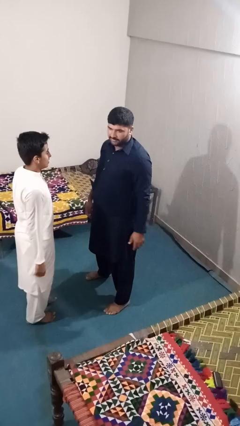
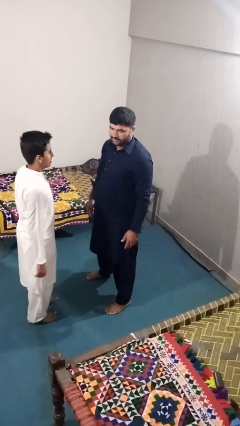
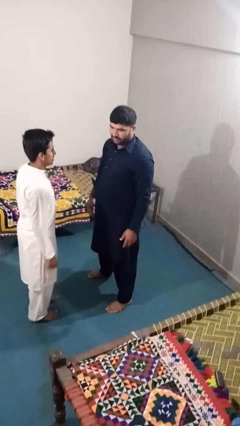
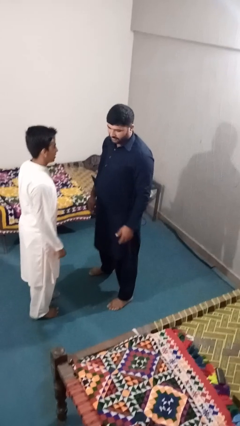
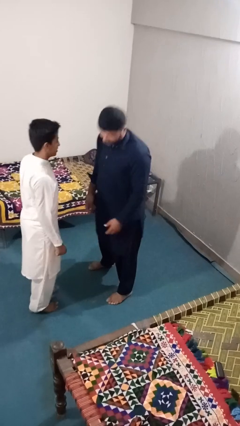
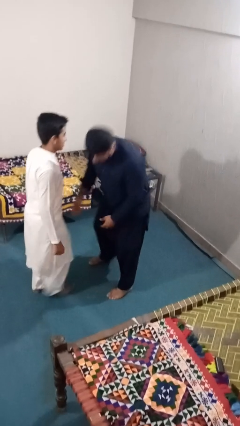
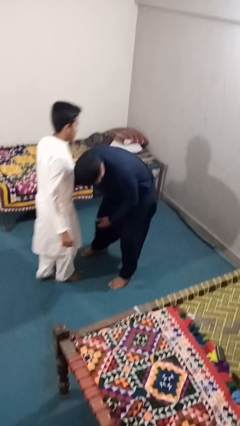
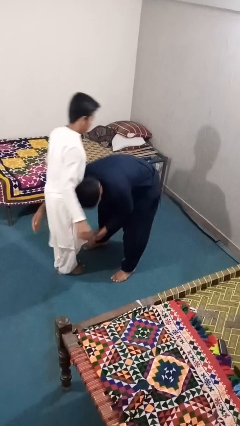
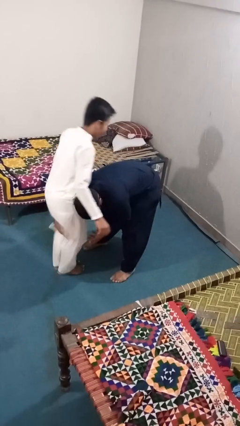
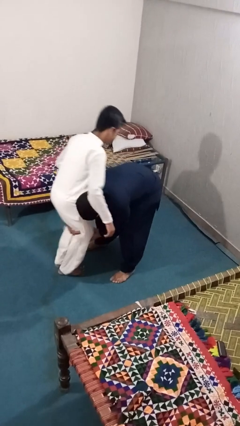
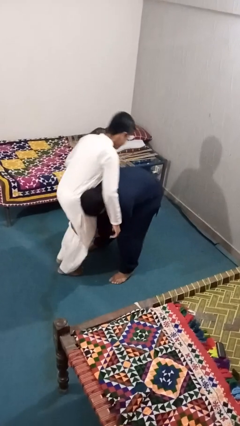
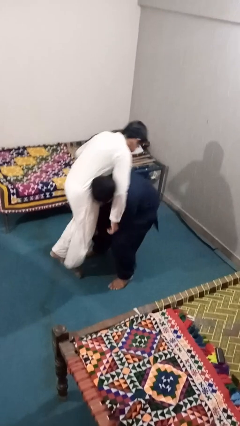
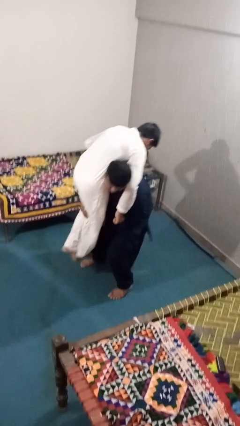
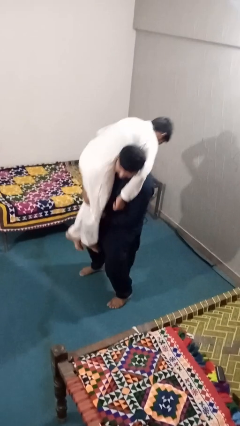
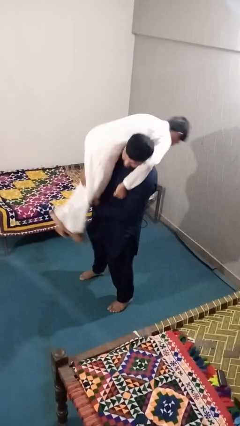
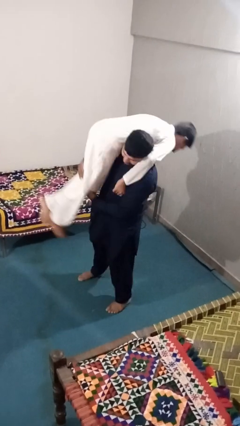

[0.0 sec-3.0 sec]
person carries person over shoulder

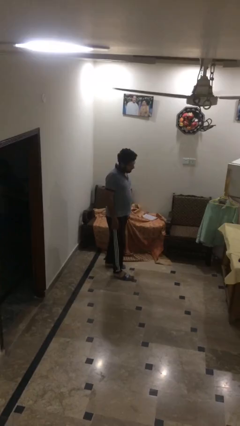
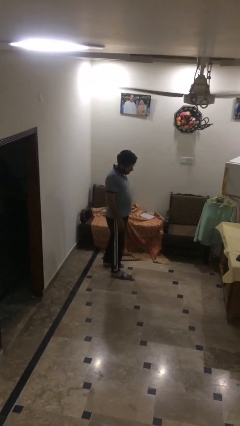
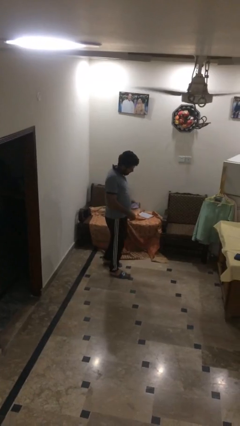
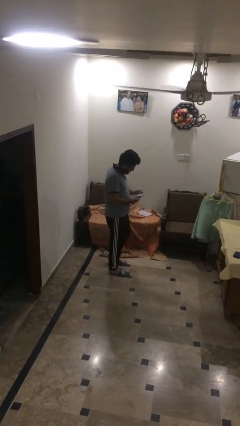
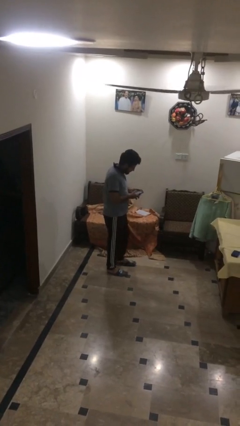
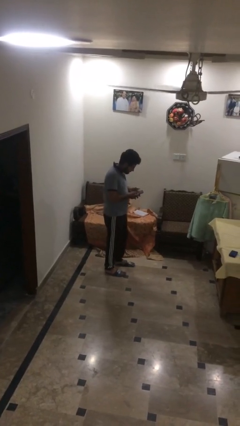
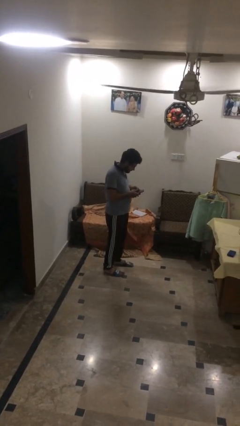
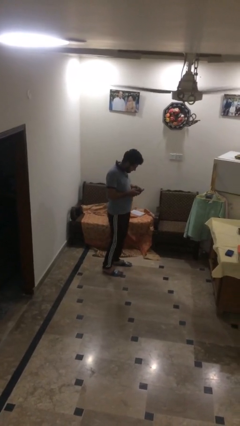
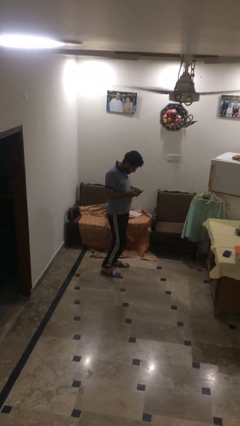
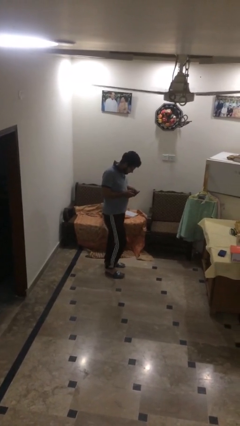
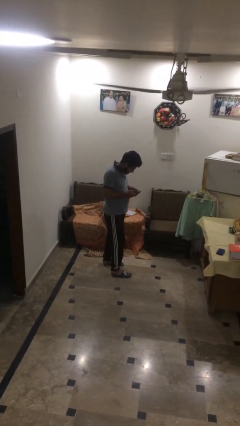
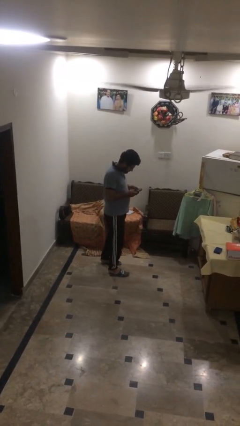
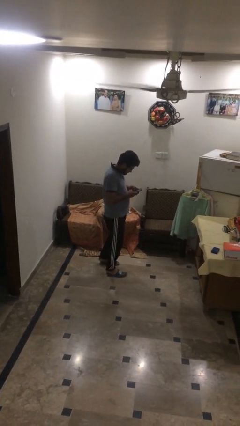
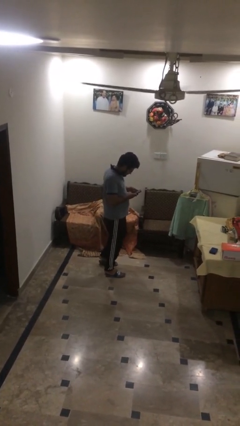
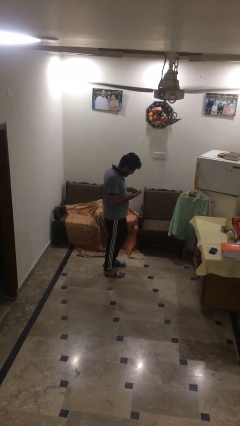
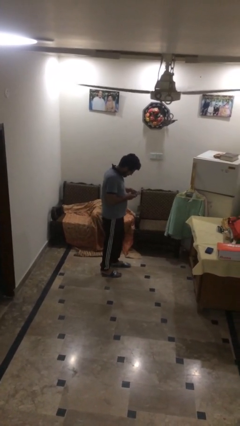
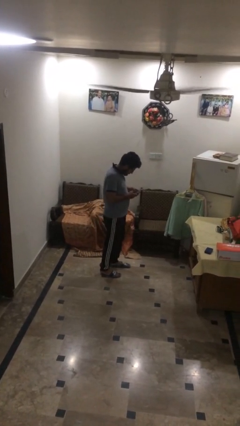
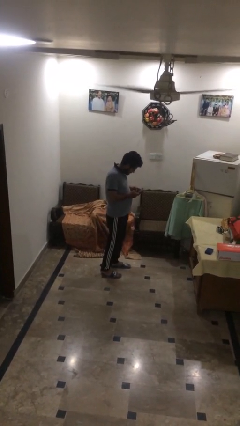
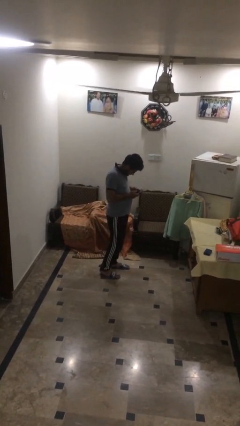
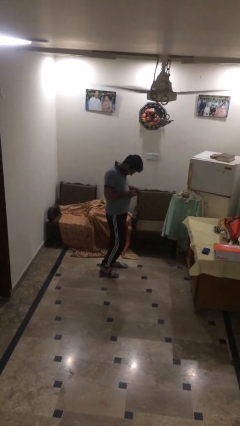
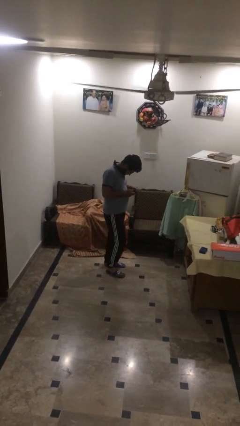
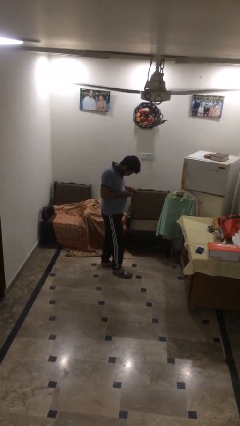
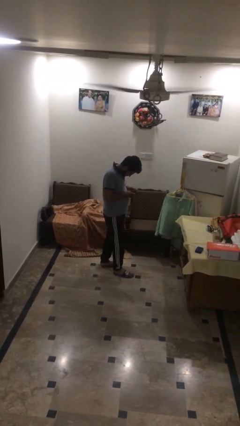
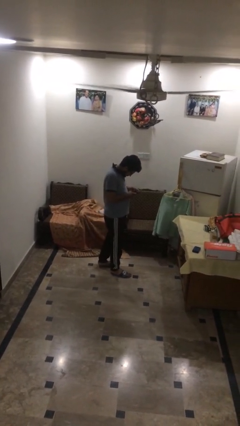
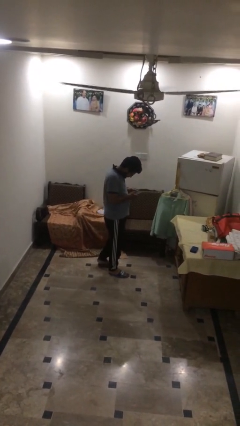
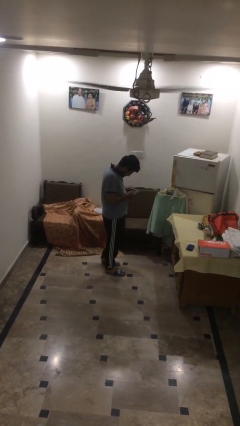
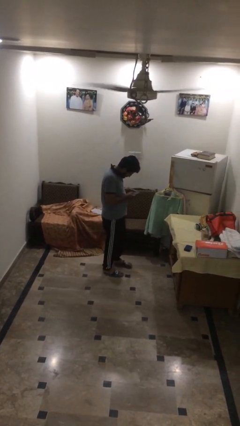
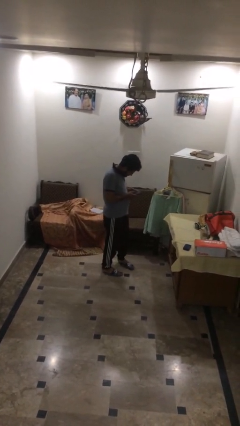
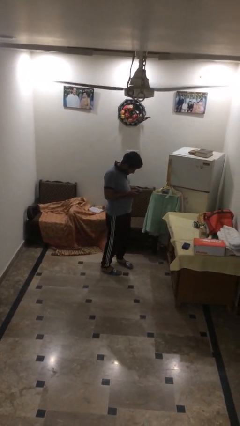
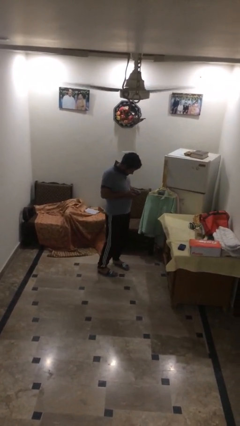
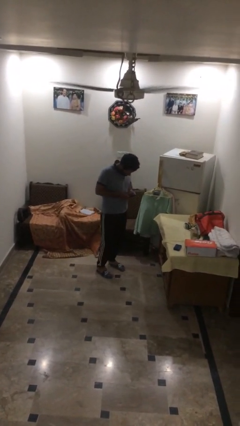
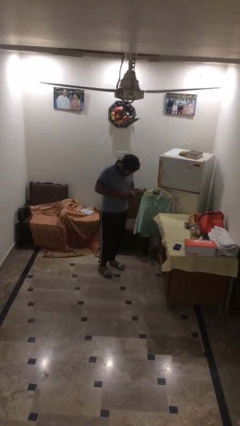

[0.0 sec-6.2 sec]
person texts on phone

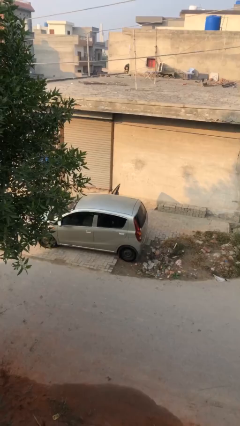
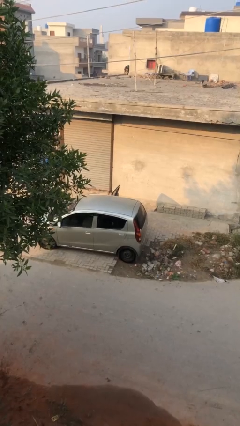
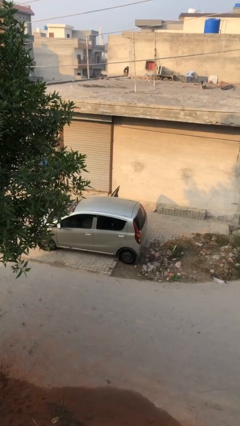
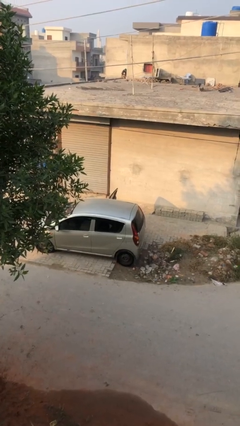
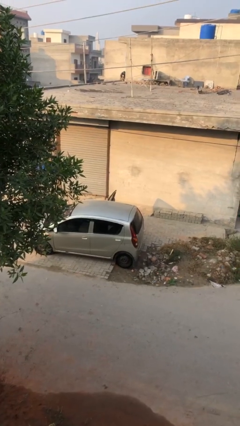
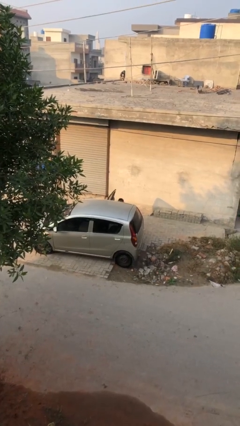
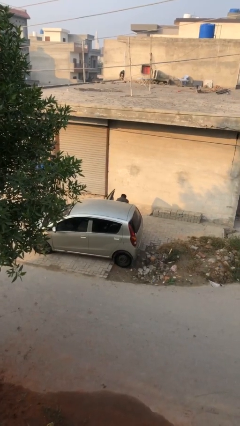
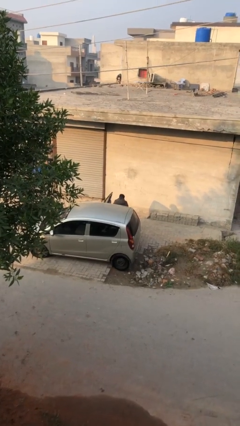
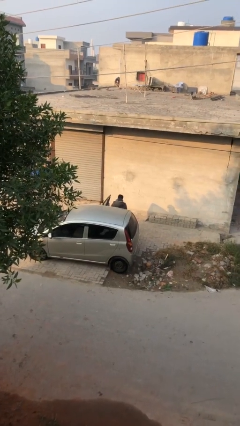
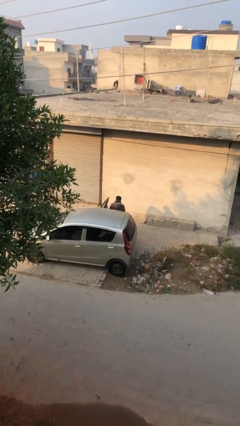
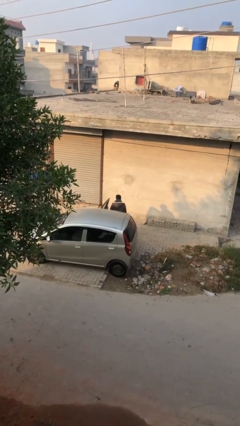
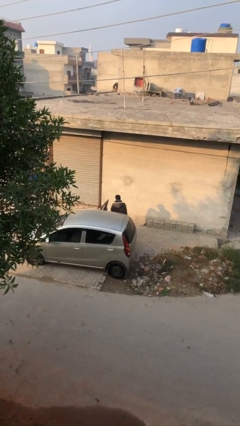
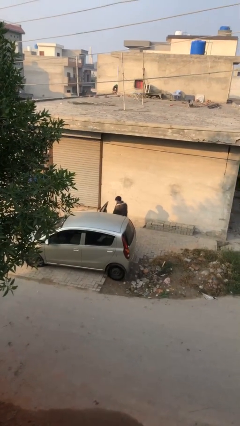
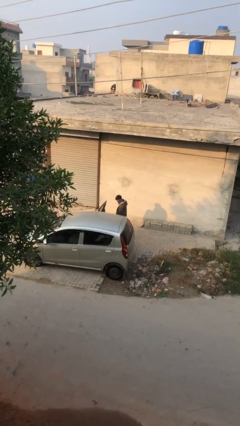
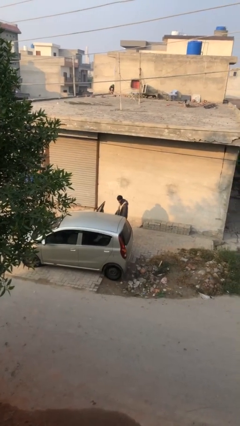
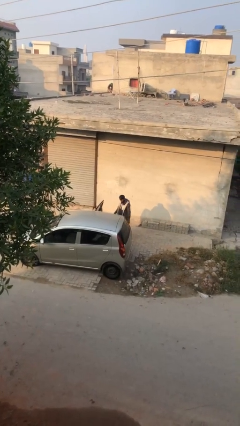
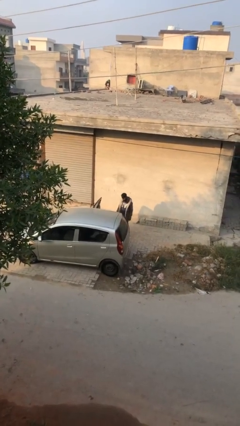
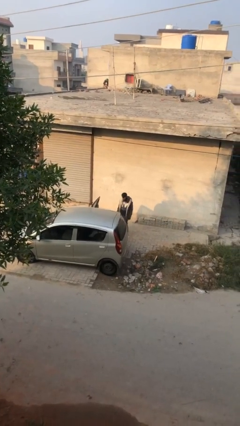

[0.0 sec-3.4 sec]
person exits car

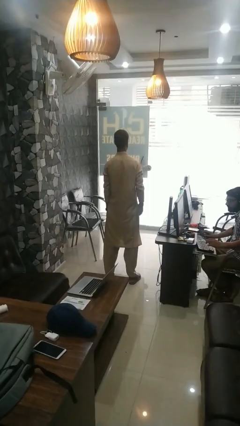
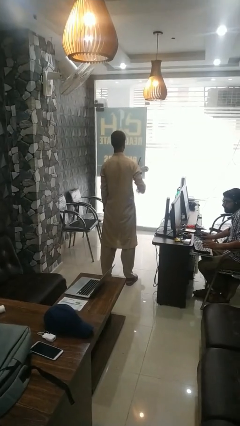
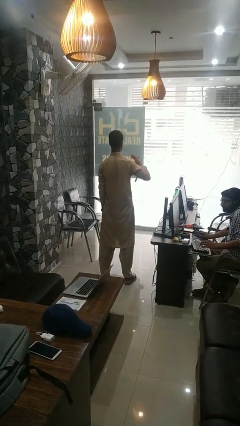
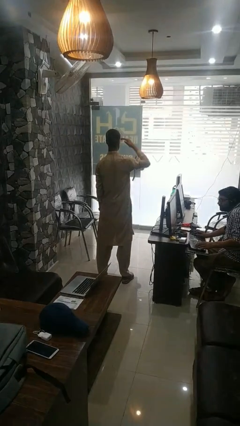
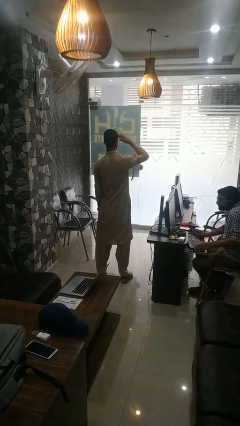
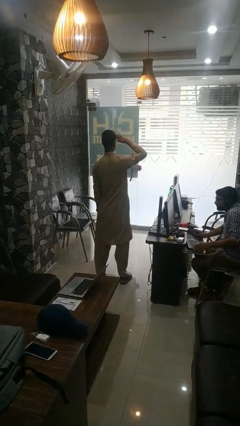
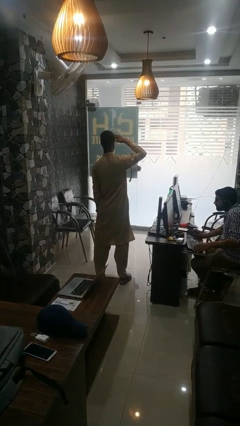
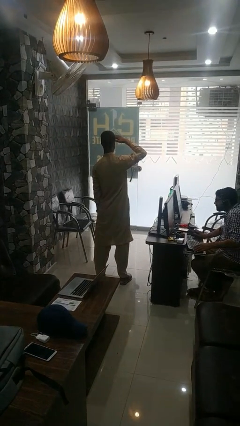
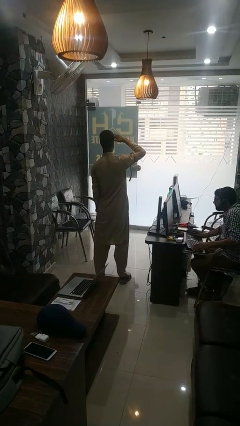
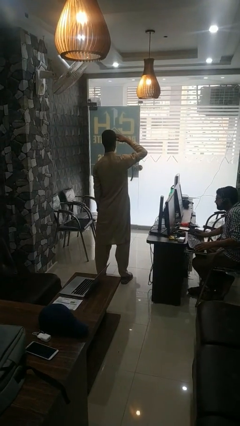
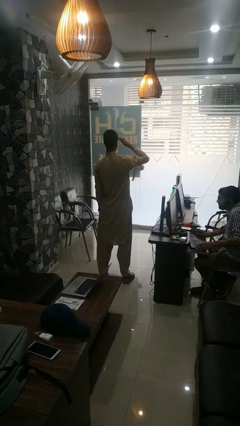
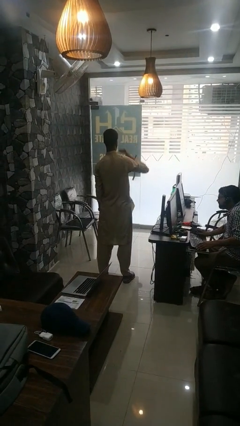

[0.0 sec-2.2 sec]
person shades eyes

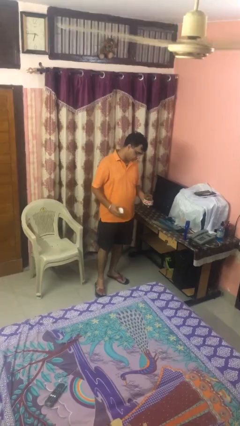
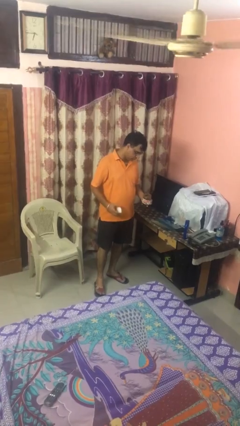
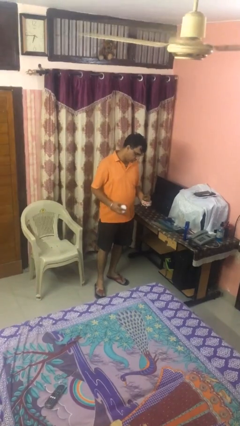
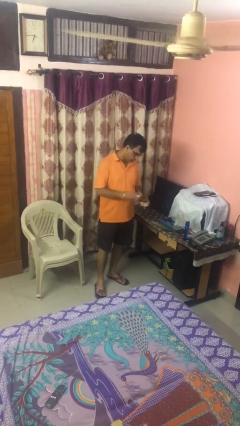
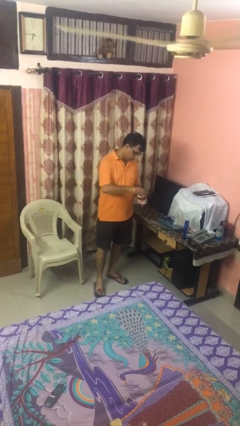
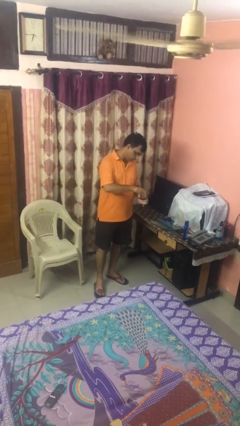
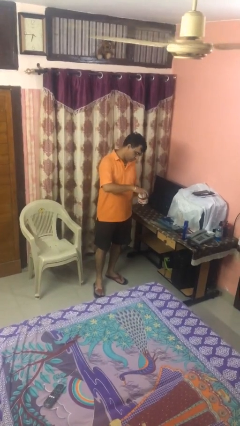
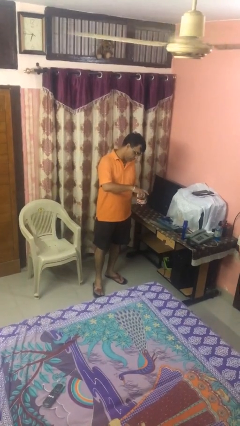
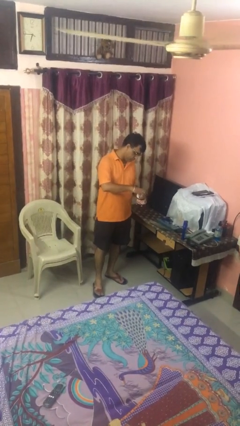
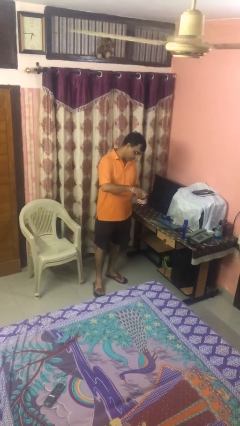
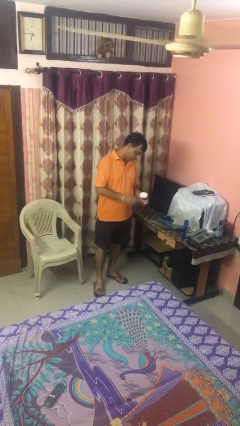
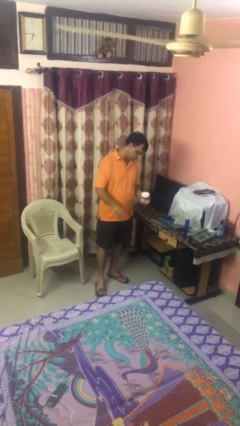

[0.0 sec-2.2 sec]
person closes jar

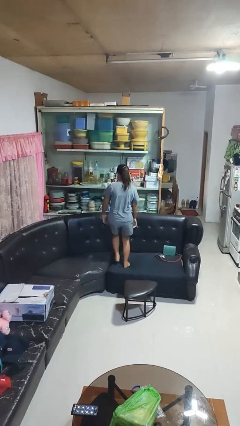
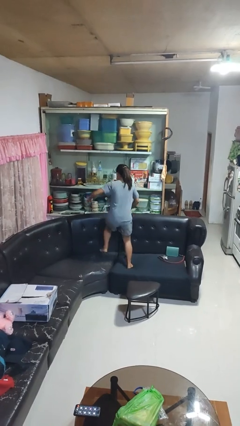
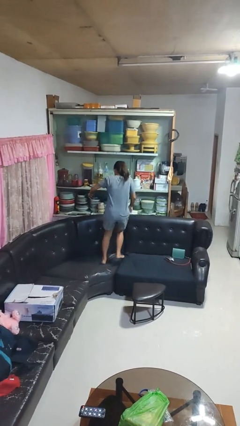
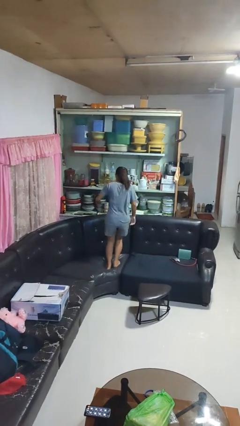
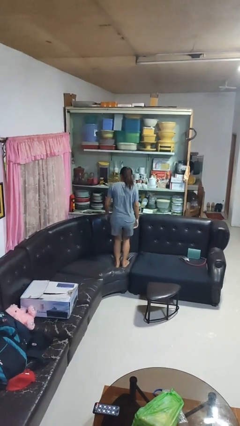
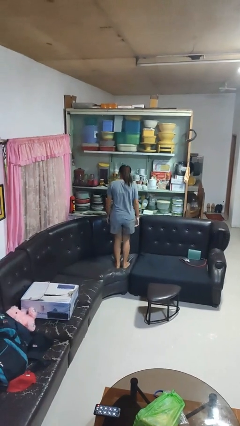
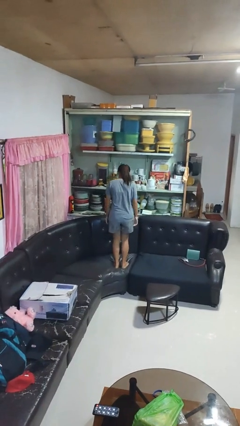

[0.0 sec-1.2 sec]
person jumps on couch
